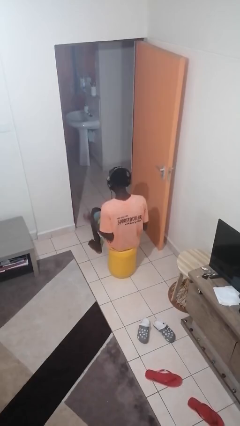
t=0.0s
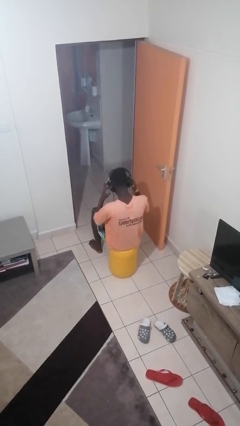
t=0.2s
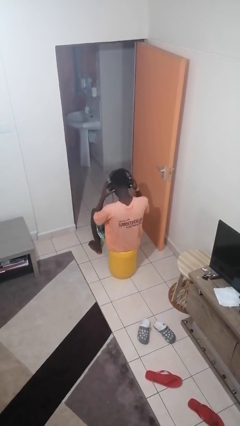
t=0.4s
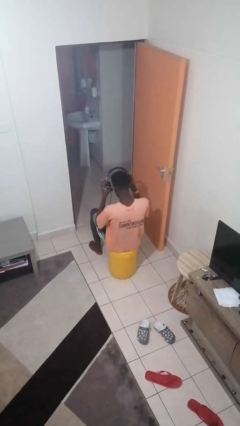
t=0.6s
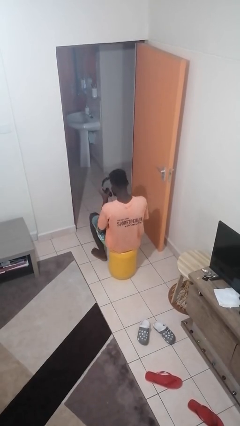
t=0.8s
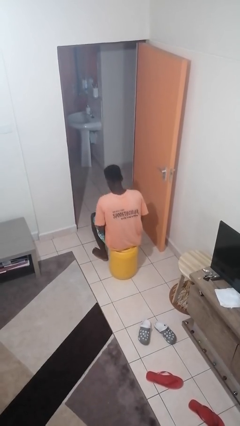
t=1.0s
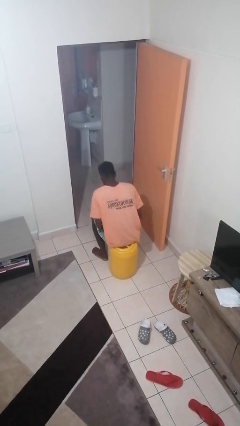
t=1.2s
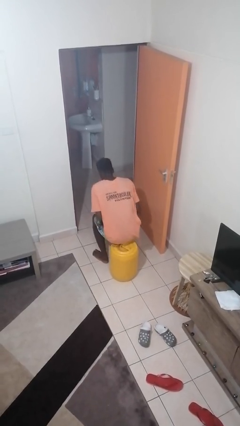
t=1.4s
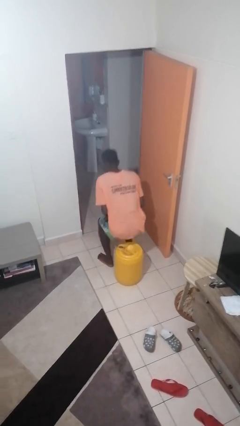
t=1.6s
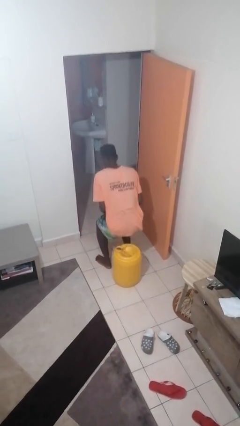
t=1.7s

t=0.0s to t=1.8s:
person takes off headphones

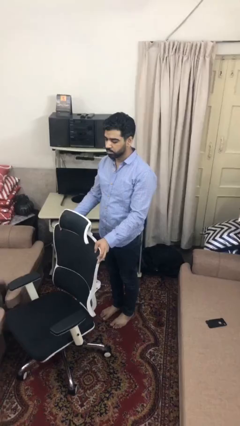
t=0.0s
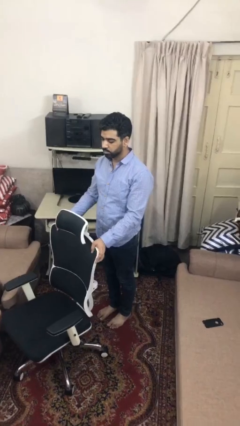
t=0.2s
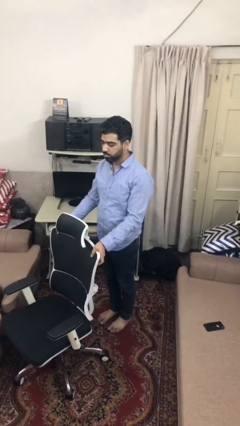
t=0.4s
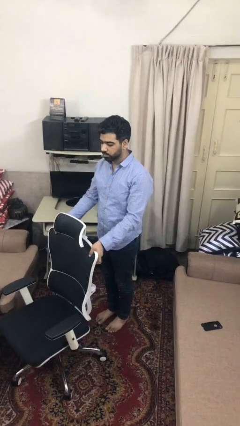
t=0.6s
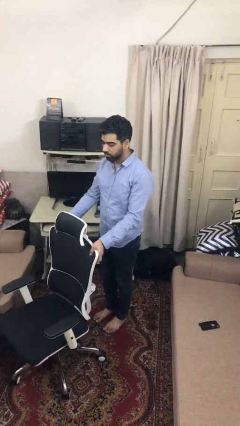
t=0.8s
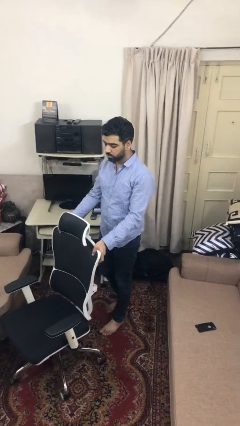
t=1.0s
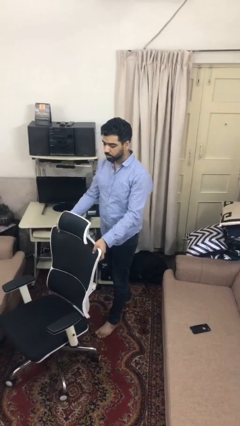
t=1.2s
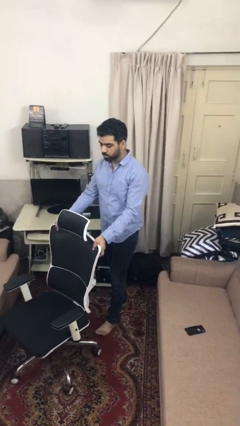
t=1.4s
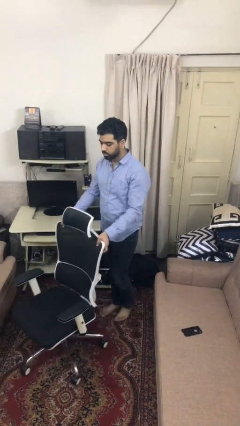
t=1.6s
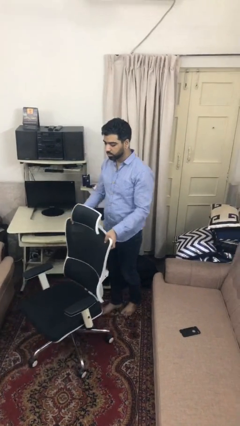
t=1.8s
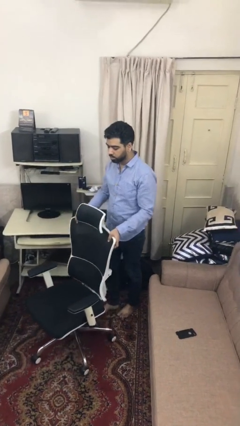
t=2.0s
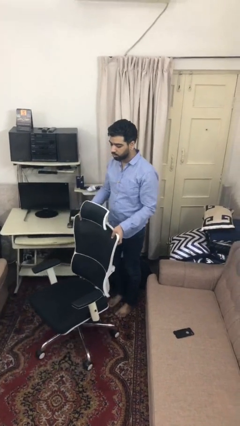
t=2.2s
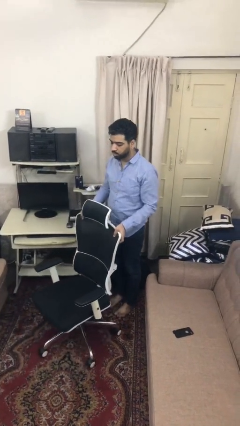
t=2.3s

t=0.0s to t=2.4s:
person pulls wheeled cart

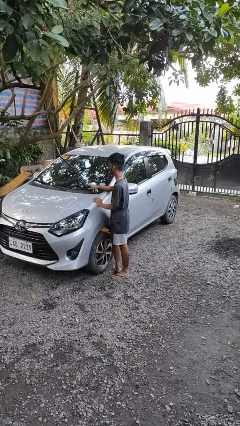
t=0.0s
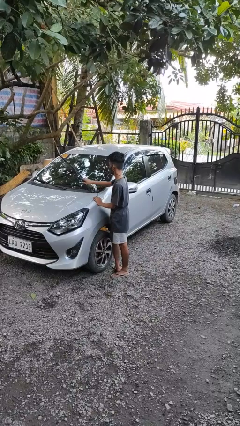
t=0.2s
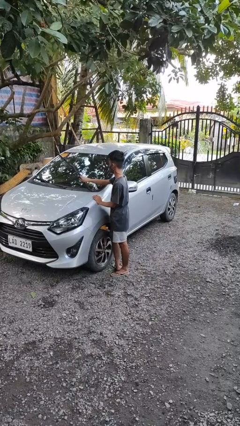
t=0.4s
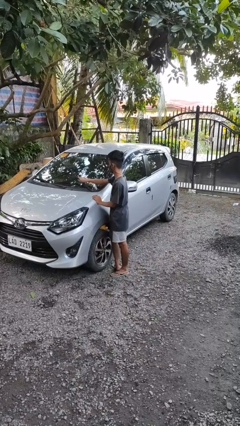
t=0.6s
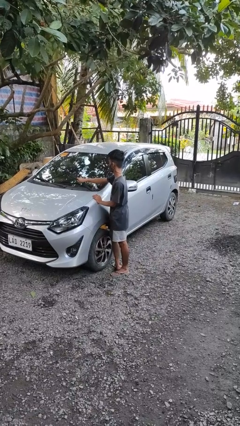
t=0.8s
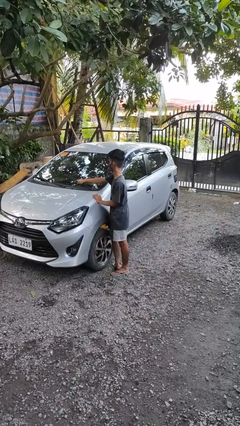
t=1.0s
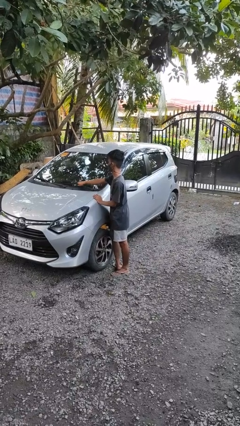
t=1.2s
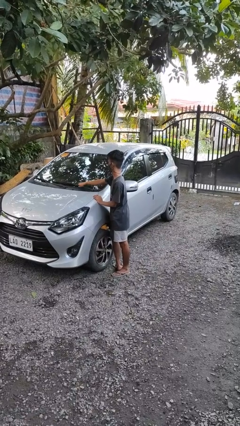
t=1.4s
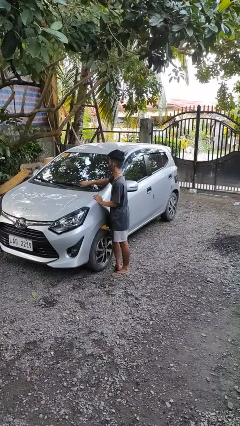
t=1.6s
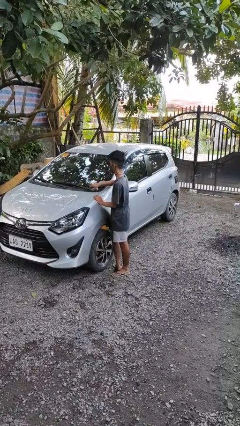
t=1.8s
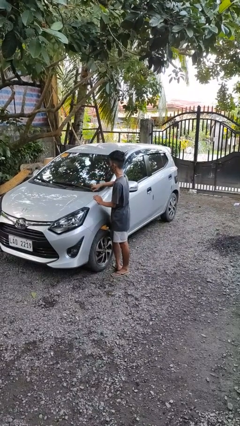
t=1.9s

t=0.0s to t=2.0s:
person flips down car wipers

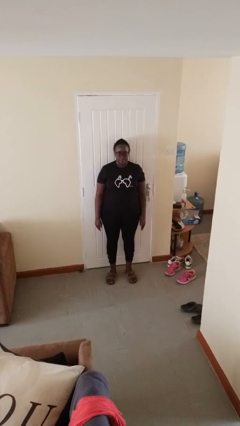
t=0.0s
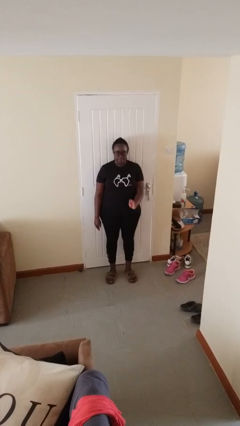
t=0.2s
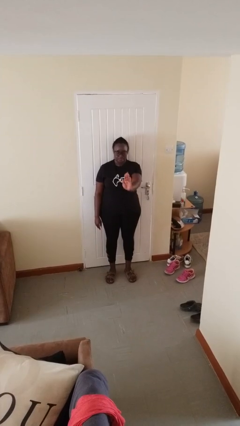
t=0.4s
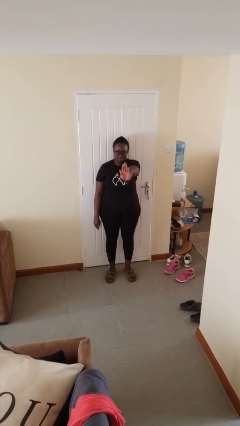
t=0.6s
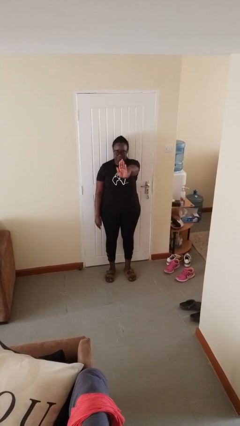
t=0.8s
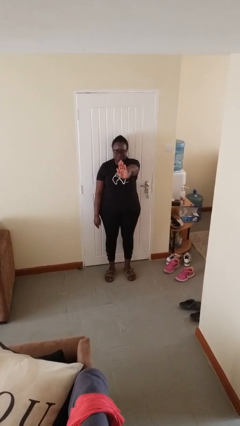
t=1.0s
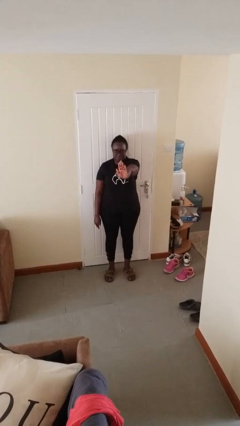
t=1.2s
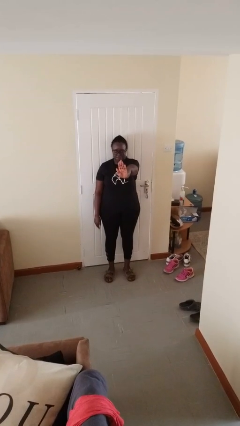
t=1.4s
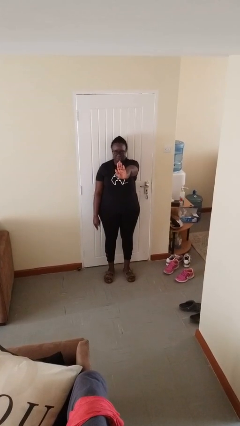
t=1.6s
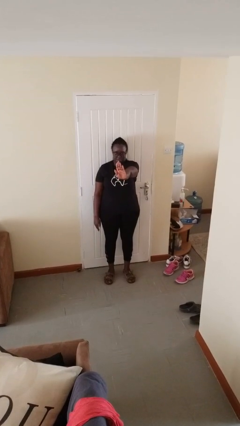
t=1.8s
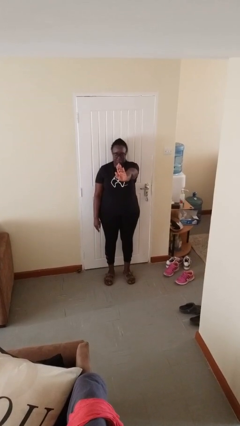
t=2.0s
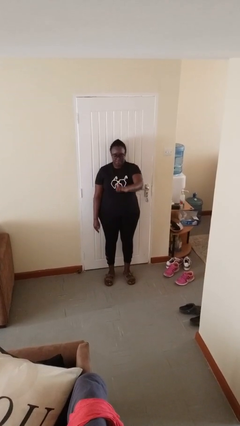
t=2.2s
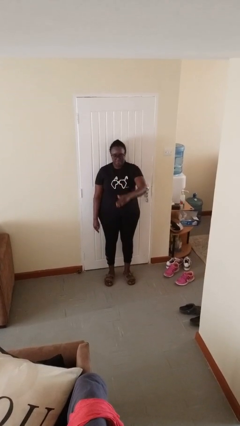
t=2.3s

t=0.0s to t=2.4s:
person gestures stop

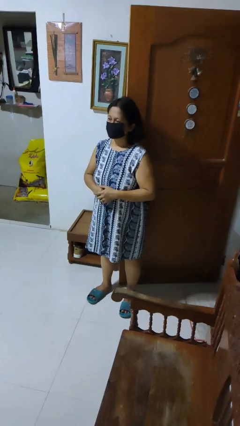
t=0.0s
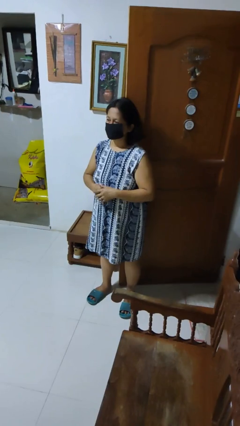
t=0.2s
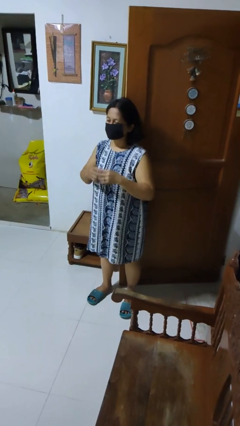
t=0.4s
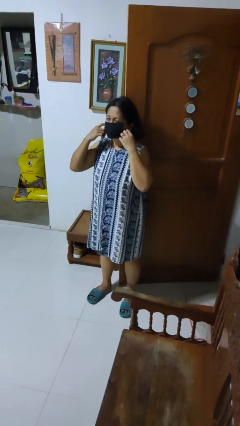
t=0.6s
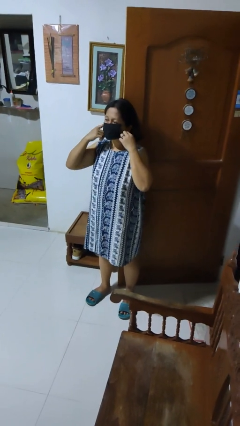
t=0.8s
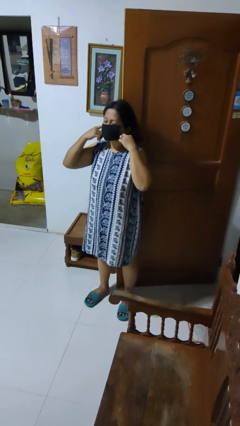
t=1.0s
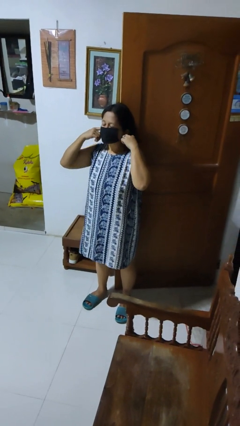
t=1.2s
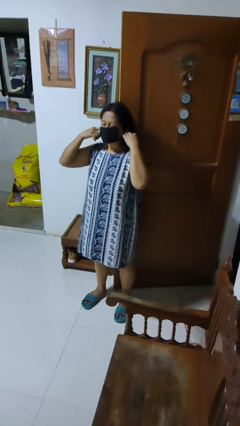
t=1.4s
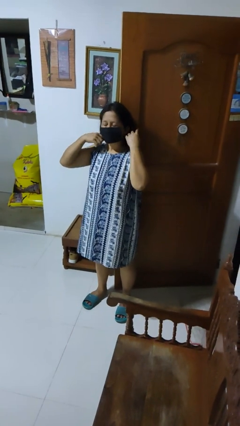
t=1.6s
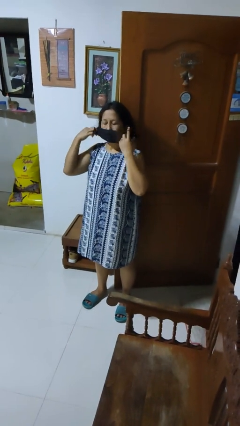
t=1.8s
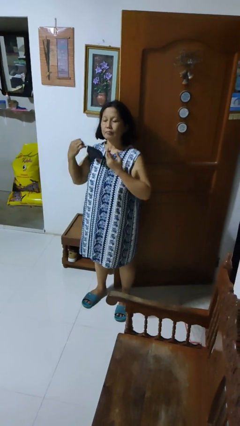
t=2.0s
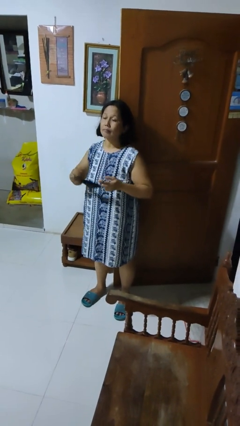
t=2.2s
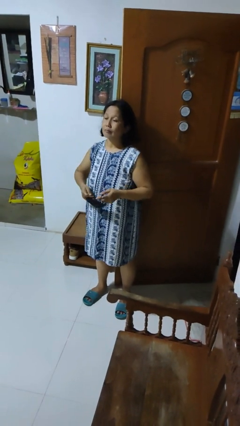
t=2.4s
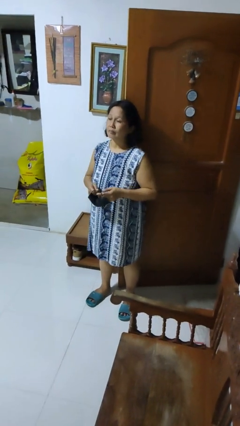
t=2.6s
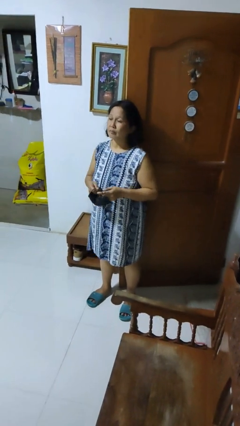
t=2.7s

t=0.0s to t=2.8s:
person takes off facemask

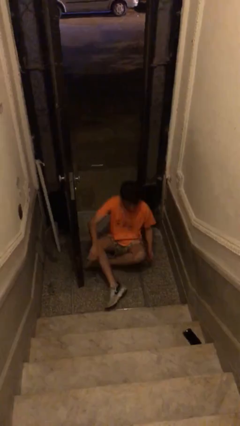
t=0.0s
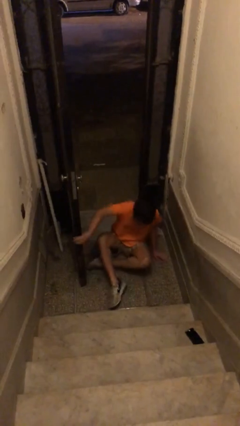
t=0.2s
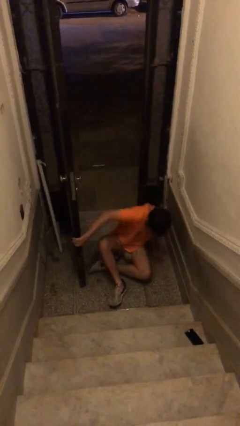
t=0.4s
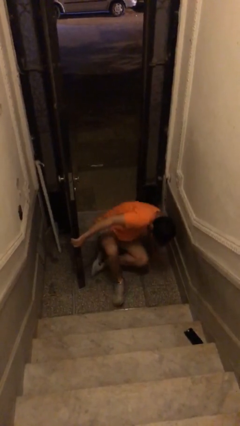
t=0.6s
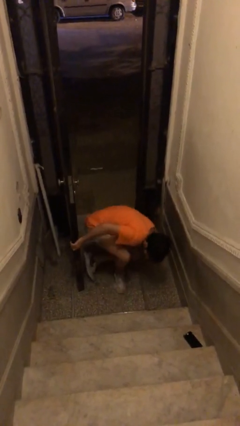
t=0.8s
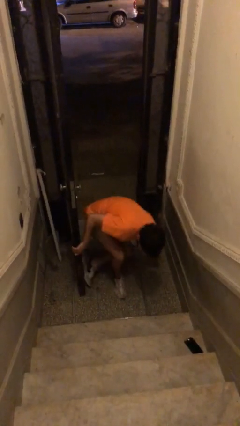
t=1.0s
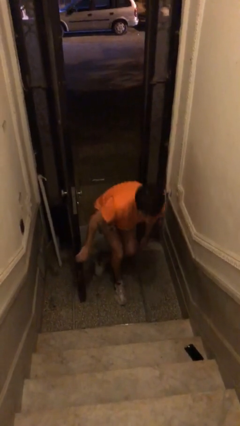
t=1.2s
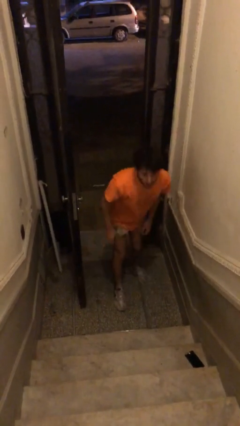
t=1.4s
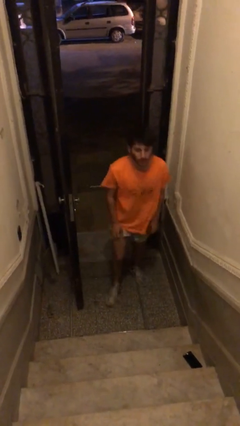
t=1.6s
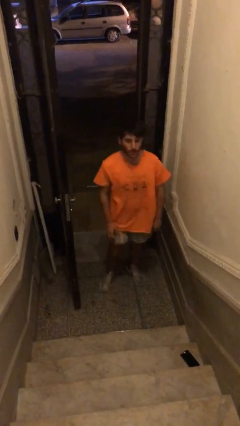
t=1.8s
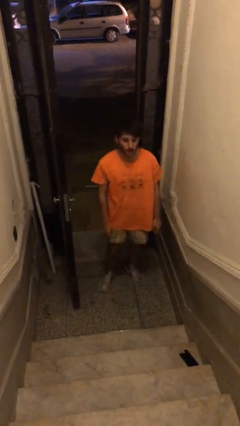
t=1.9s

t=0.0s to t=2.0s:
person stands up

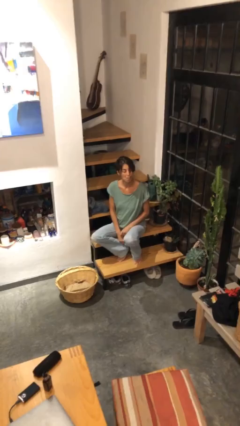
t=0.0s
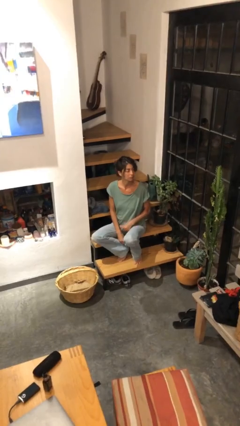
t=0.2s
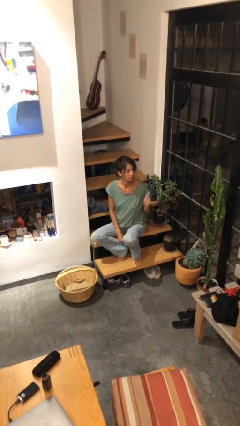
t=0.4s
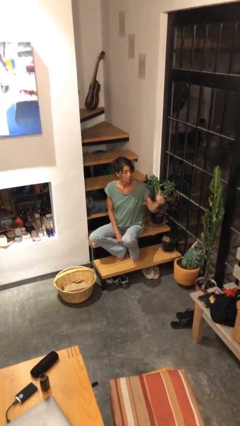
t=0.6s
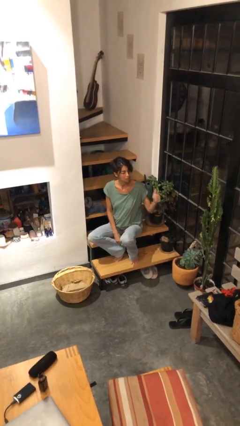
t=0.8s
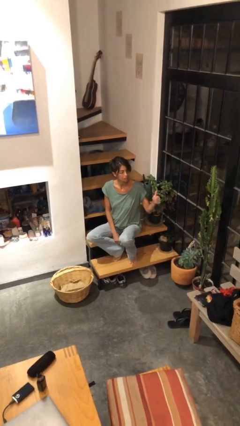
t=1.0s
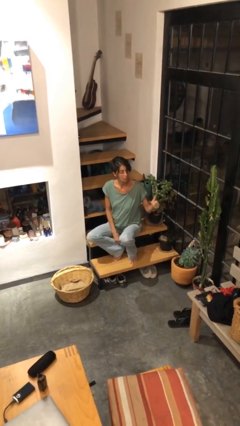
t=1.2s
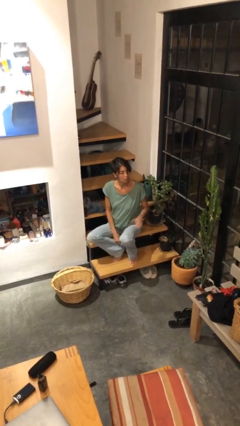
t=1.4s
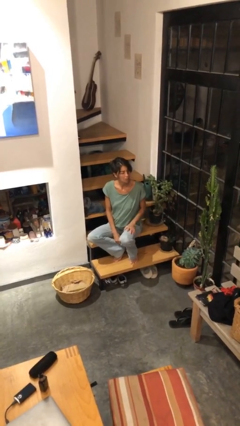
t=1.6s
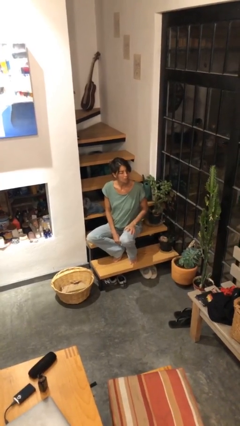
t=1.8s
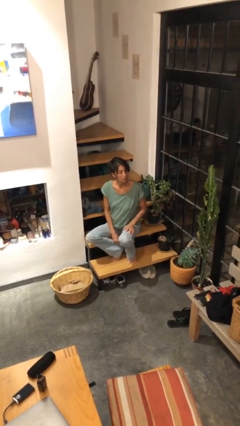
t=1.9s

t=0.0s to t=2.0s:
person gestures thumbs up

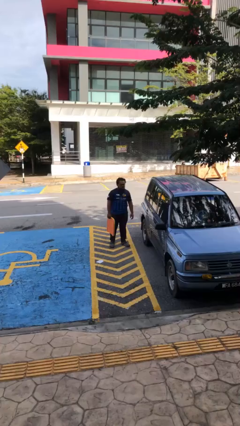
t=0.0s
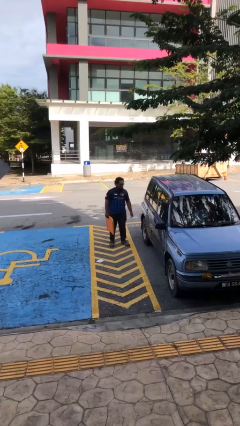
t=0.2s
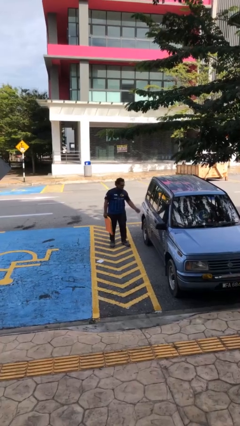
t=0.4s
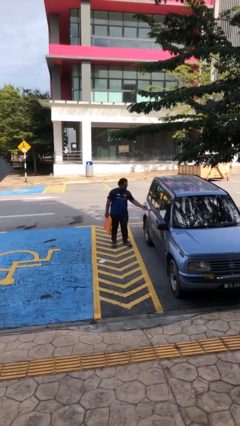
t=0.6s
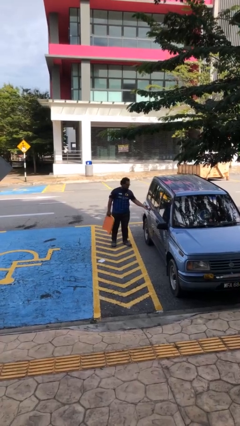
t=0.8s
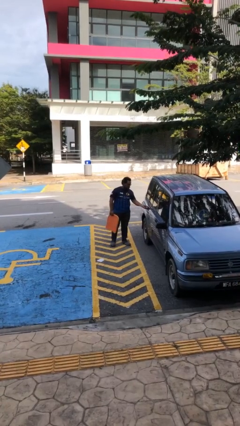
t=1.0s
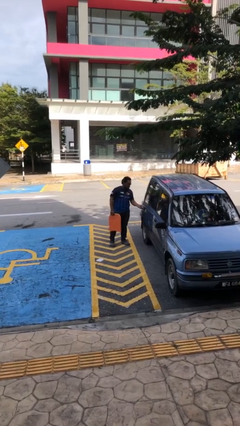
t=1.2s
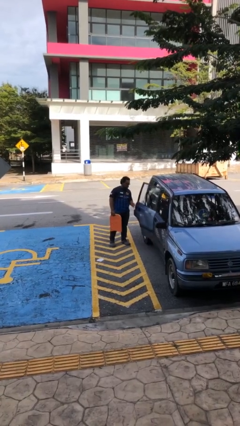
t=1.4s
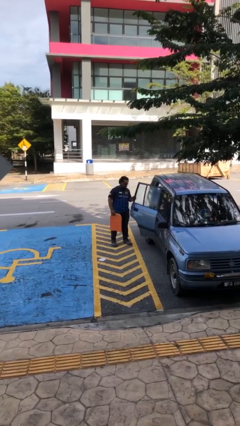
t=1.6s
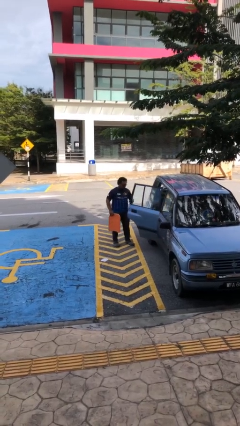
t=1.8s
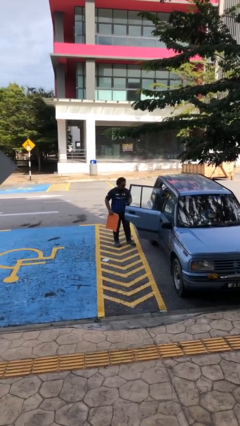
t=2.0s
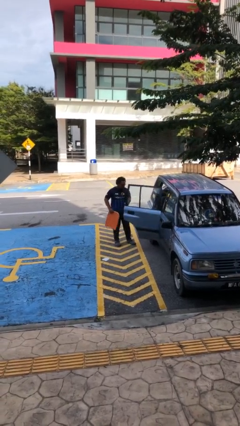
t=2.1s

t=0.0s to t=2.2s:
person opens car door
